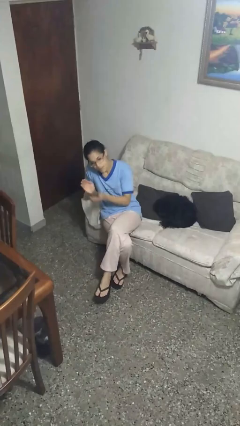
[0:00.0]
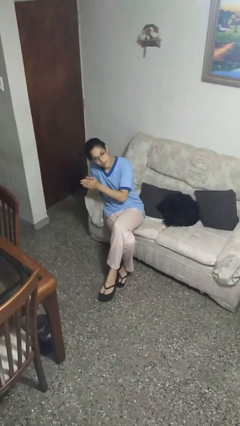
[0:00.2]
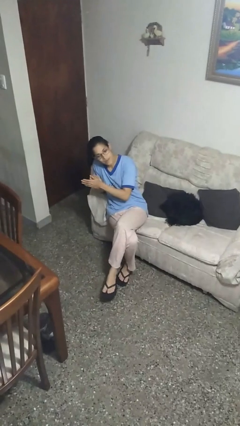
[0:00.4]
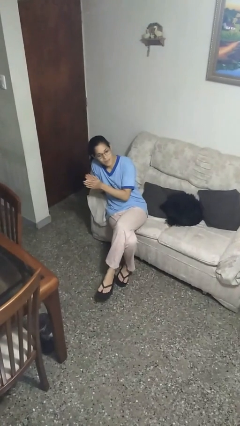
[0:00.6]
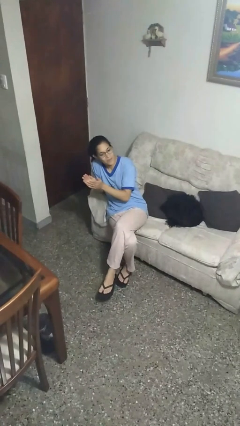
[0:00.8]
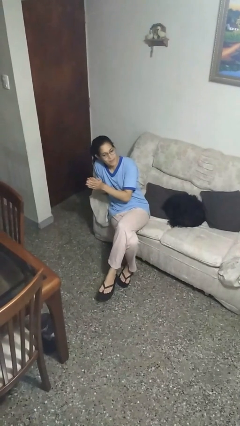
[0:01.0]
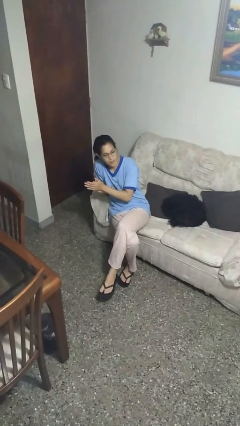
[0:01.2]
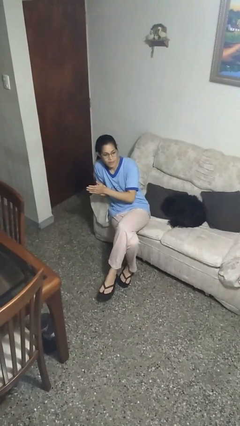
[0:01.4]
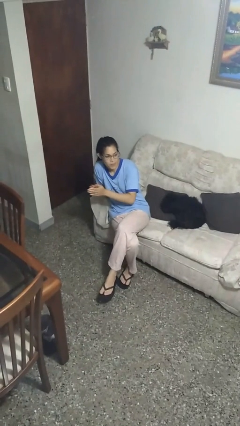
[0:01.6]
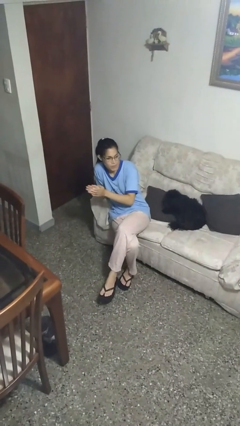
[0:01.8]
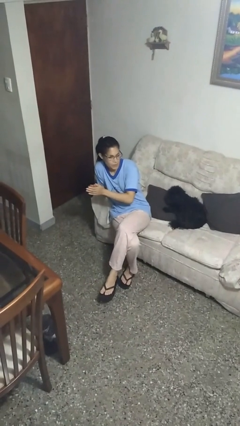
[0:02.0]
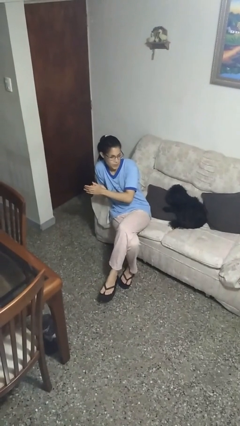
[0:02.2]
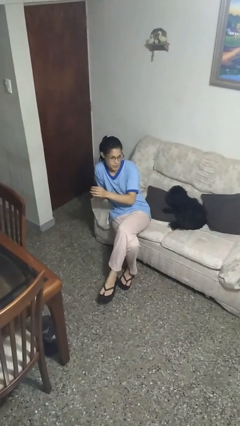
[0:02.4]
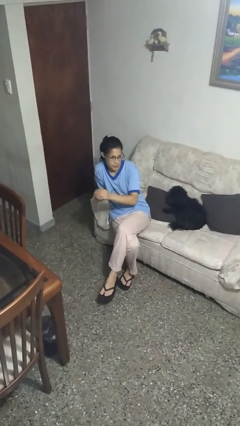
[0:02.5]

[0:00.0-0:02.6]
person claps hands

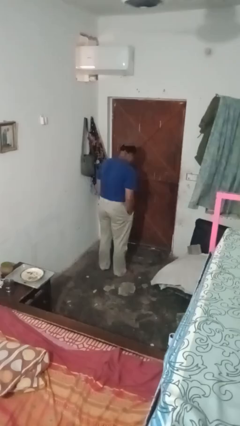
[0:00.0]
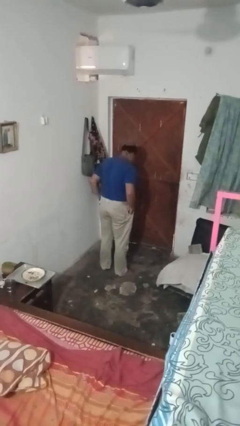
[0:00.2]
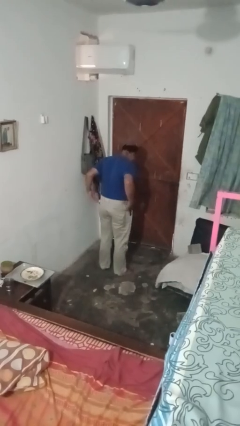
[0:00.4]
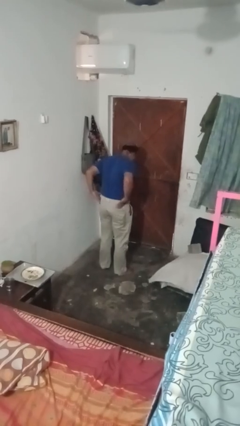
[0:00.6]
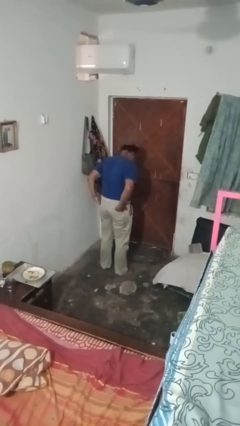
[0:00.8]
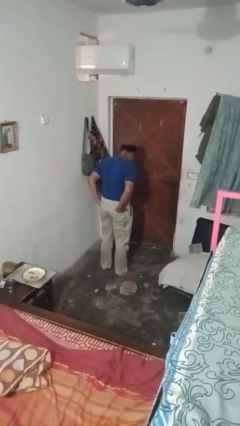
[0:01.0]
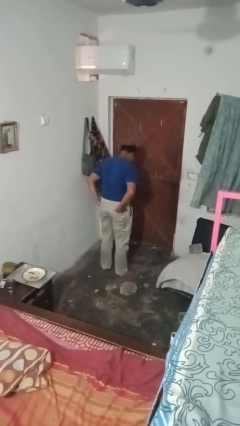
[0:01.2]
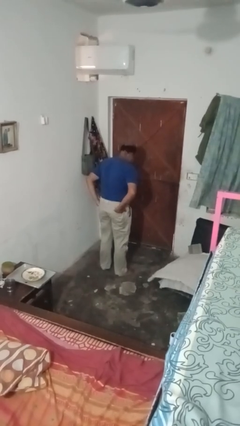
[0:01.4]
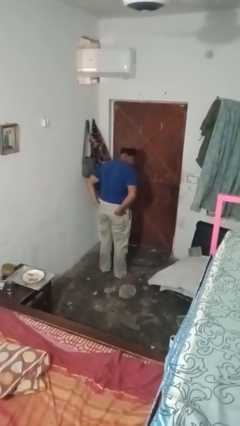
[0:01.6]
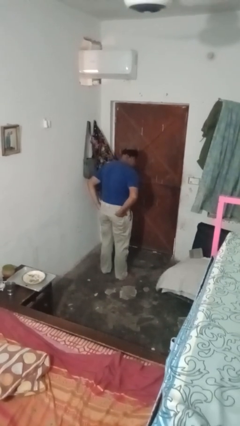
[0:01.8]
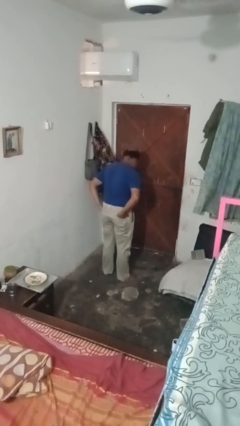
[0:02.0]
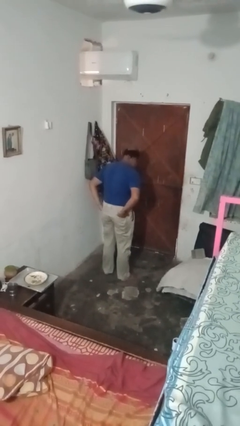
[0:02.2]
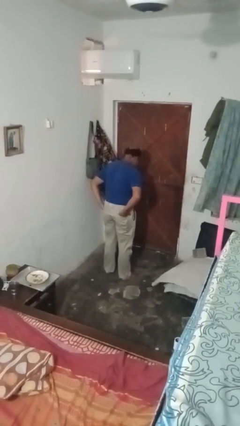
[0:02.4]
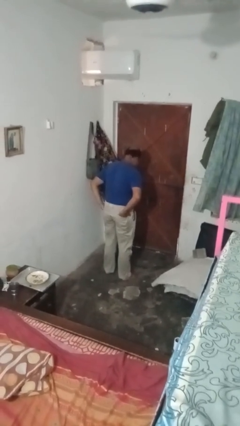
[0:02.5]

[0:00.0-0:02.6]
person puts hands in back pockets

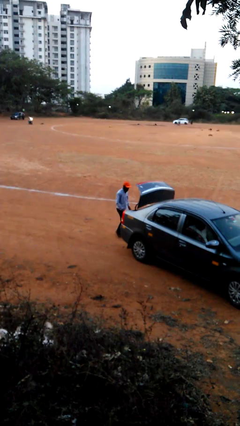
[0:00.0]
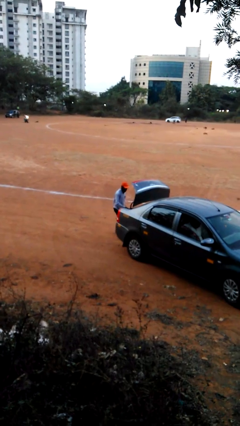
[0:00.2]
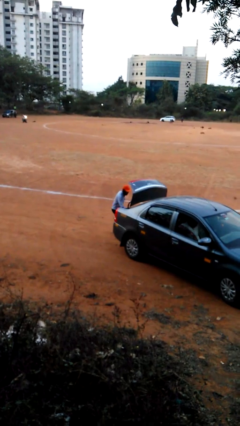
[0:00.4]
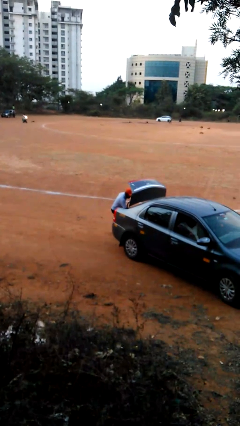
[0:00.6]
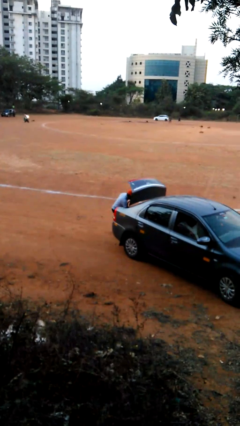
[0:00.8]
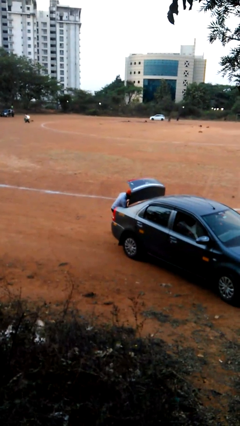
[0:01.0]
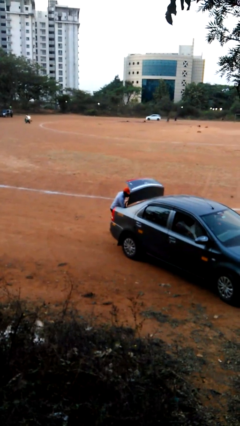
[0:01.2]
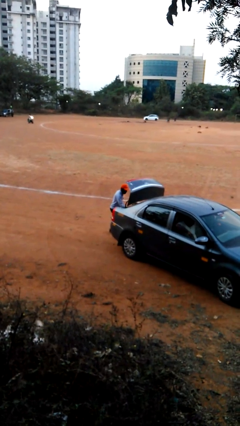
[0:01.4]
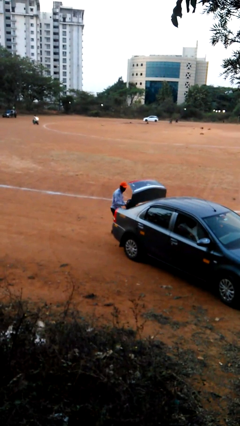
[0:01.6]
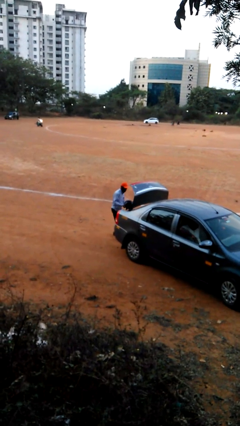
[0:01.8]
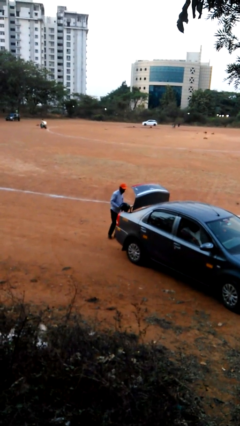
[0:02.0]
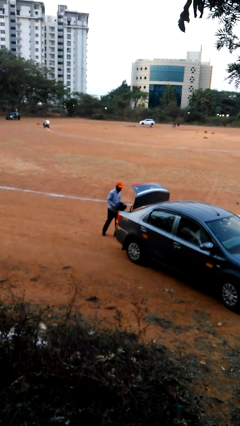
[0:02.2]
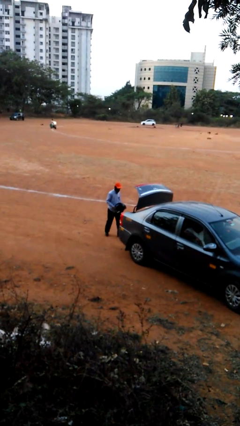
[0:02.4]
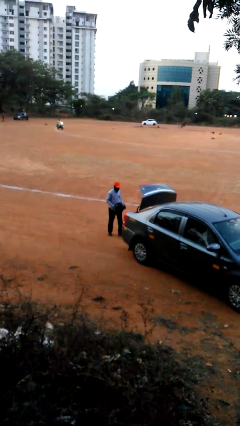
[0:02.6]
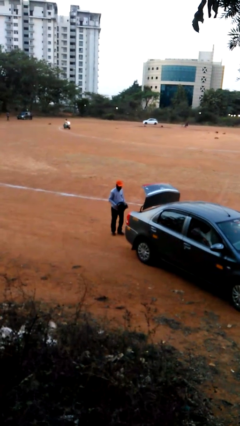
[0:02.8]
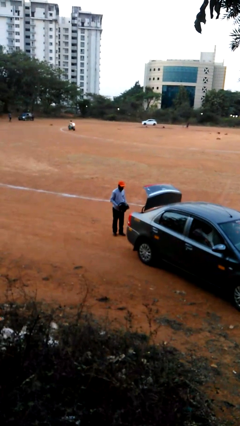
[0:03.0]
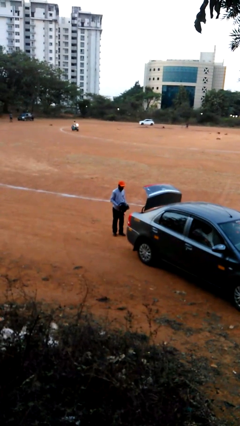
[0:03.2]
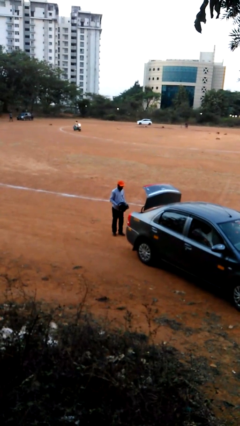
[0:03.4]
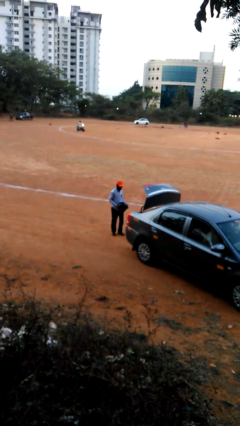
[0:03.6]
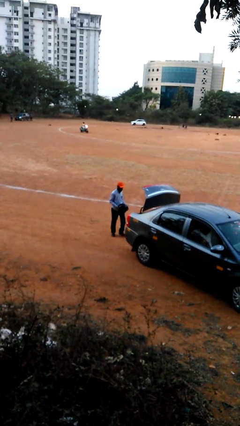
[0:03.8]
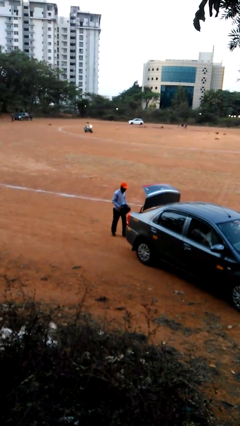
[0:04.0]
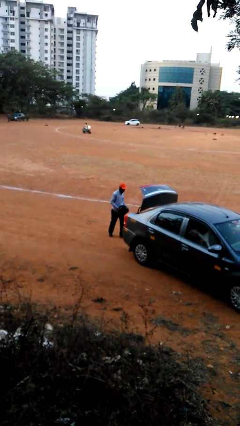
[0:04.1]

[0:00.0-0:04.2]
person unloads car

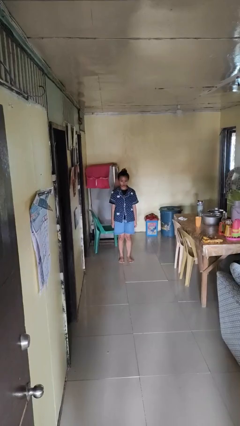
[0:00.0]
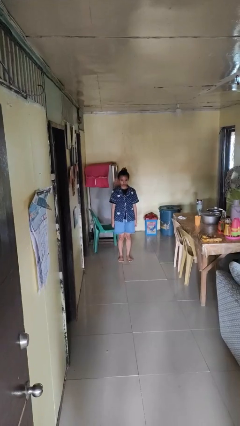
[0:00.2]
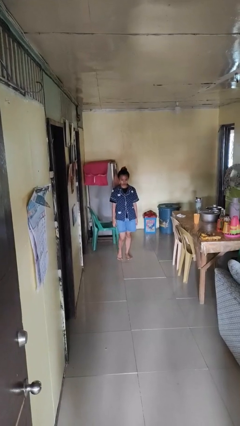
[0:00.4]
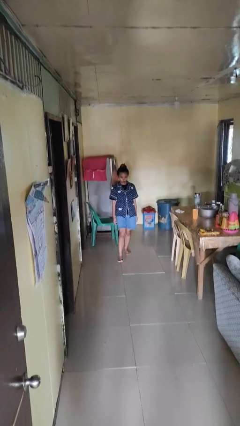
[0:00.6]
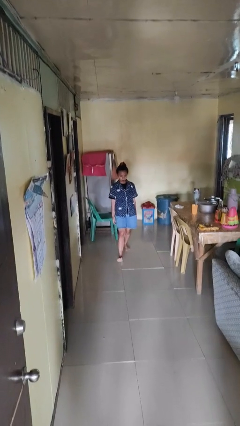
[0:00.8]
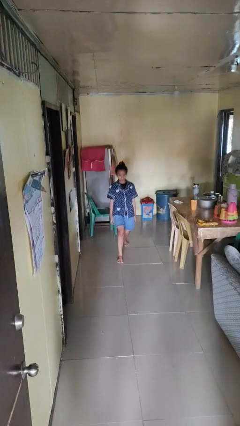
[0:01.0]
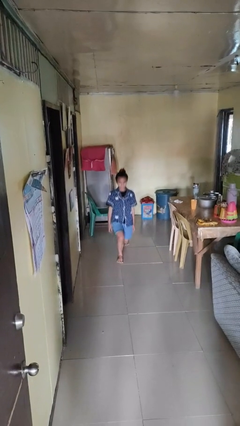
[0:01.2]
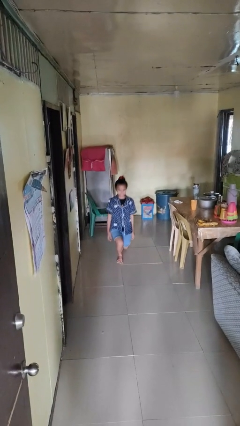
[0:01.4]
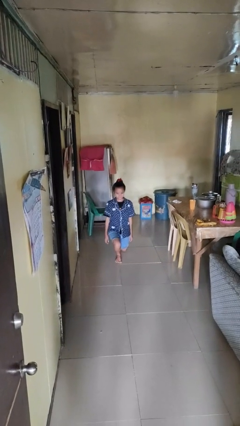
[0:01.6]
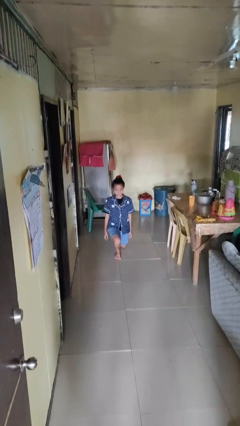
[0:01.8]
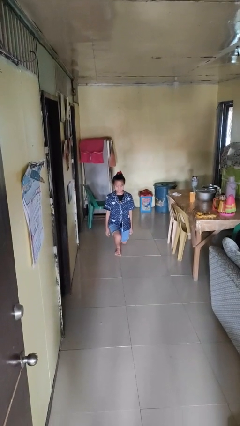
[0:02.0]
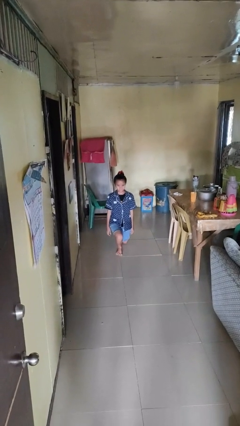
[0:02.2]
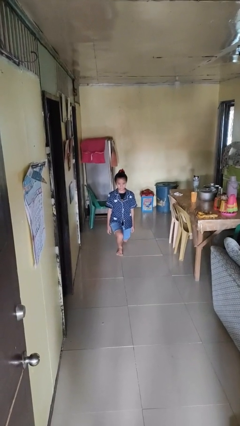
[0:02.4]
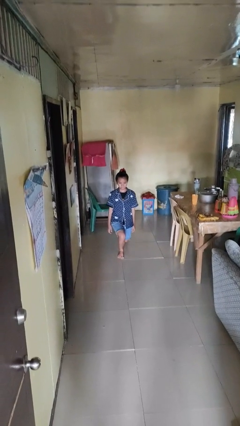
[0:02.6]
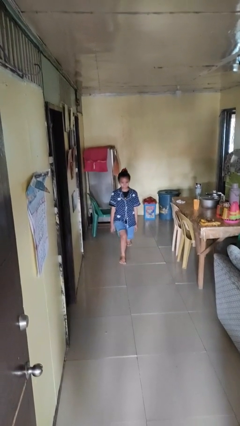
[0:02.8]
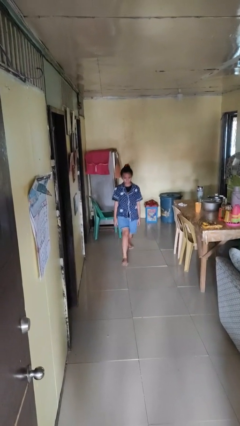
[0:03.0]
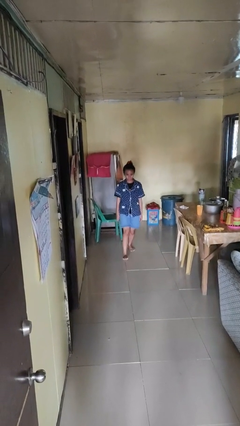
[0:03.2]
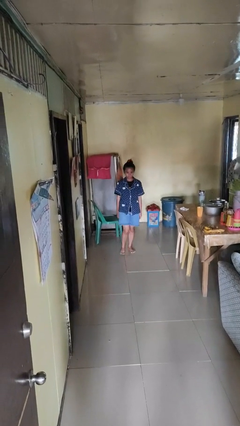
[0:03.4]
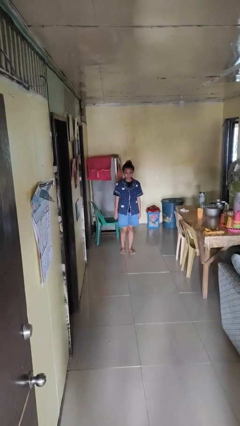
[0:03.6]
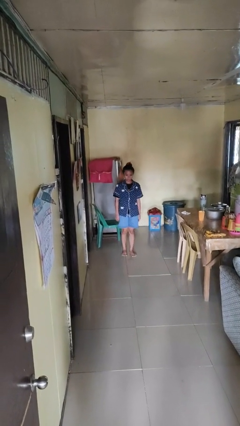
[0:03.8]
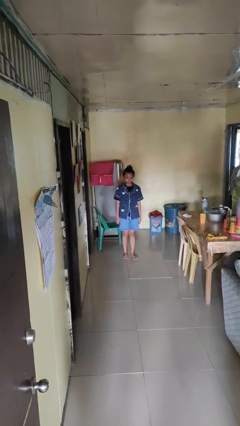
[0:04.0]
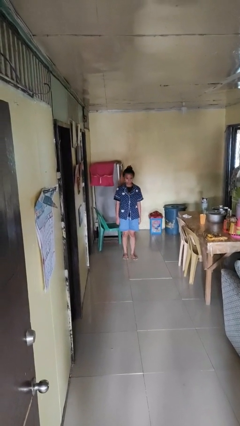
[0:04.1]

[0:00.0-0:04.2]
person exercises with lunges

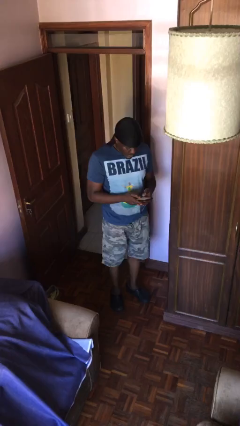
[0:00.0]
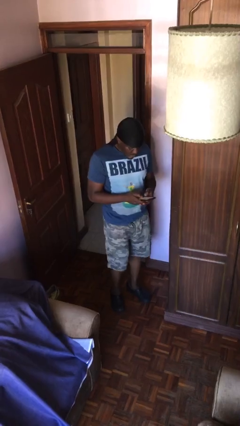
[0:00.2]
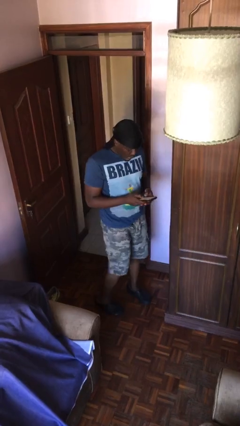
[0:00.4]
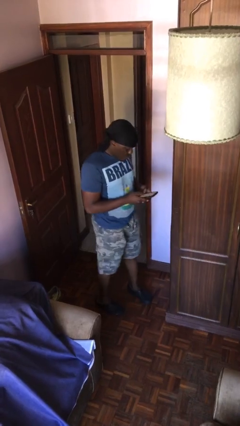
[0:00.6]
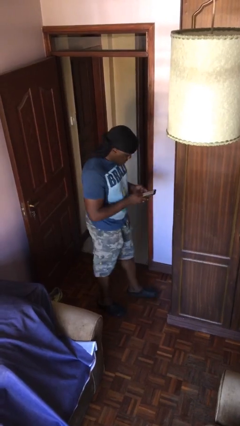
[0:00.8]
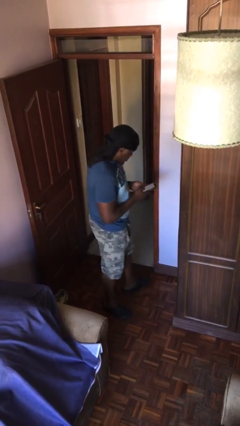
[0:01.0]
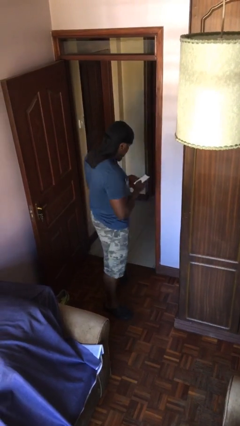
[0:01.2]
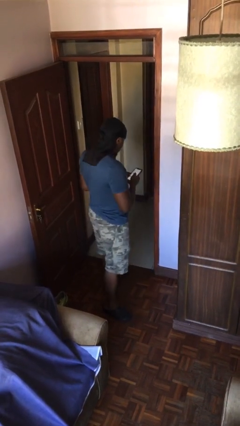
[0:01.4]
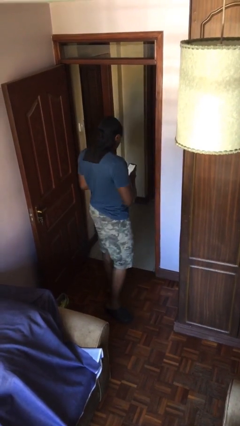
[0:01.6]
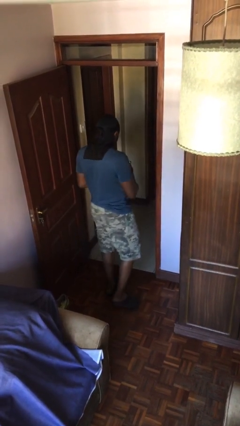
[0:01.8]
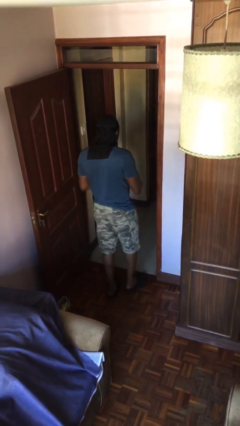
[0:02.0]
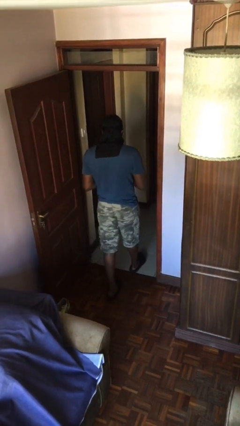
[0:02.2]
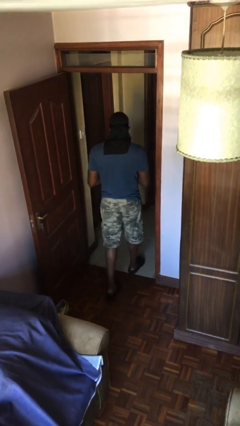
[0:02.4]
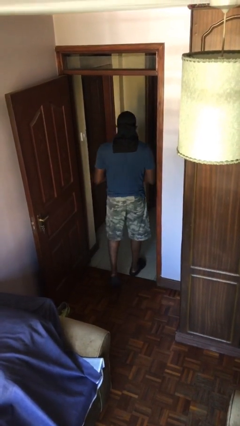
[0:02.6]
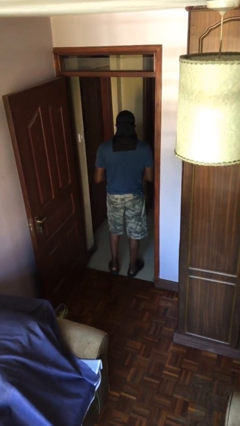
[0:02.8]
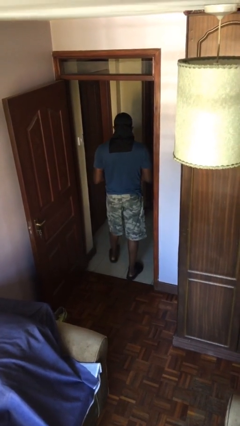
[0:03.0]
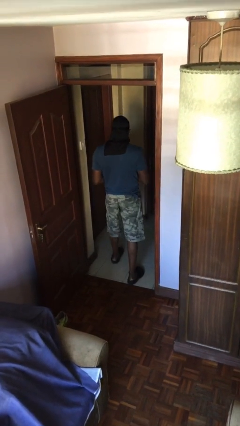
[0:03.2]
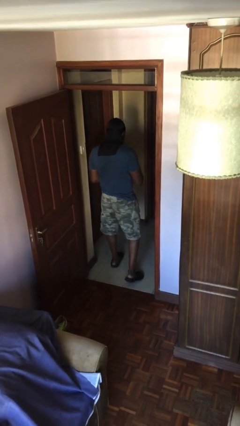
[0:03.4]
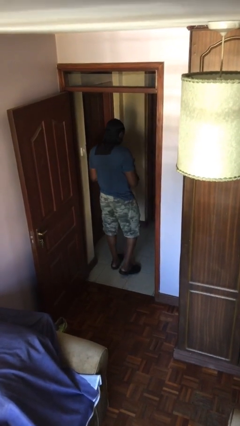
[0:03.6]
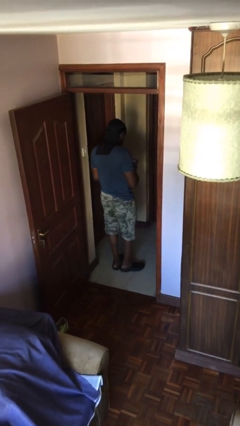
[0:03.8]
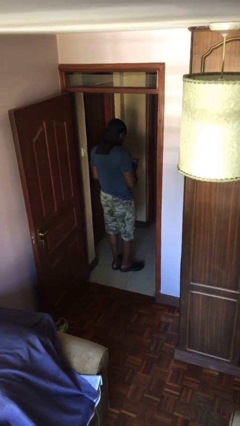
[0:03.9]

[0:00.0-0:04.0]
person exits scene through structure

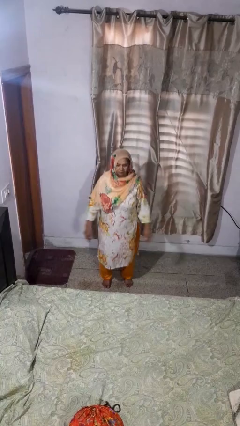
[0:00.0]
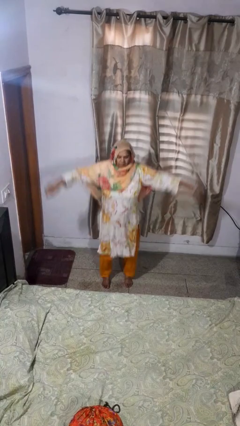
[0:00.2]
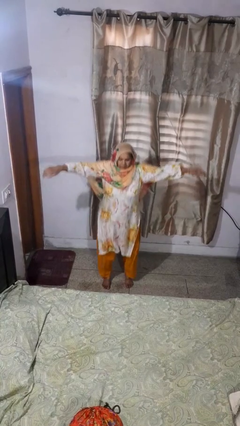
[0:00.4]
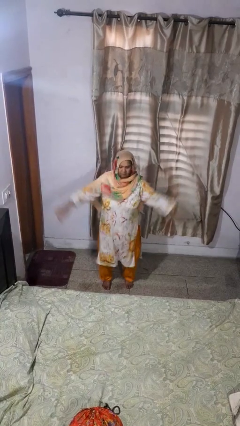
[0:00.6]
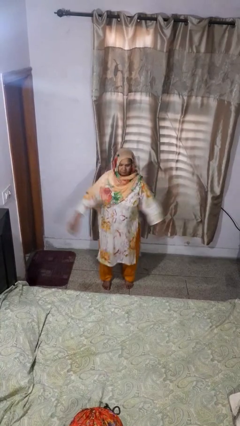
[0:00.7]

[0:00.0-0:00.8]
person jumps
